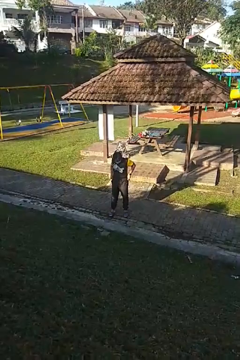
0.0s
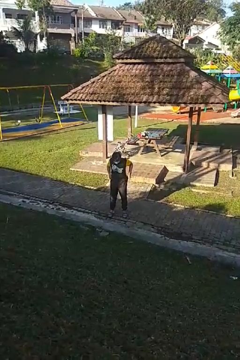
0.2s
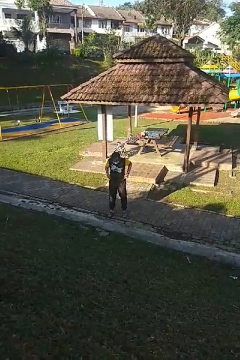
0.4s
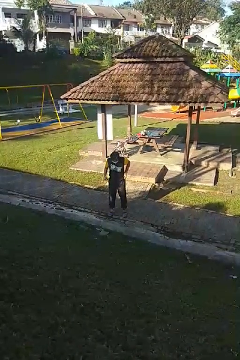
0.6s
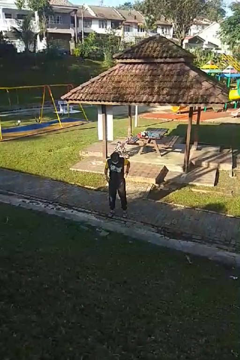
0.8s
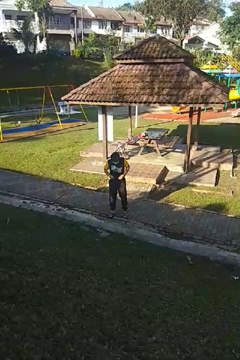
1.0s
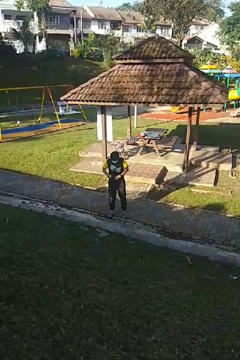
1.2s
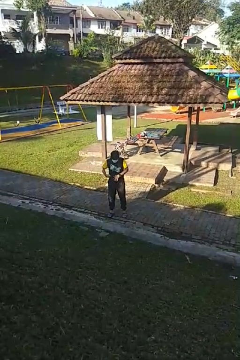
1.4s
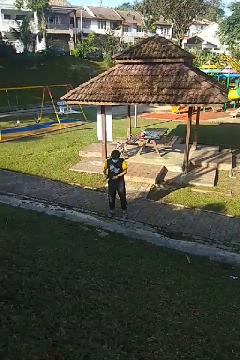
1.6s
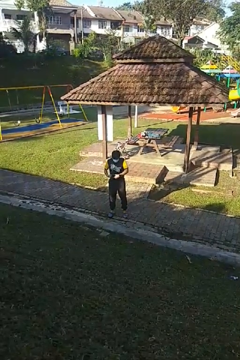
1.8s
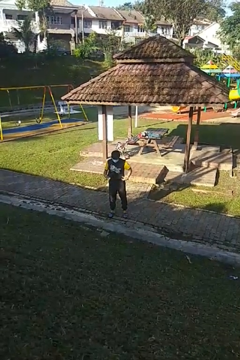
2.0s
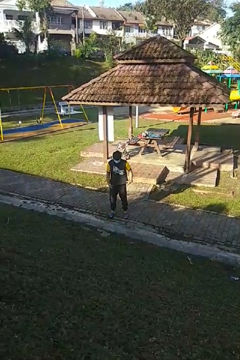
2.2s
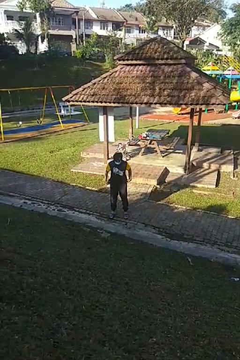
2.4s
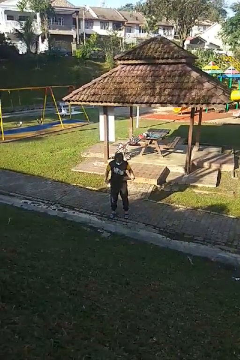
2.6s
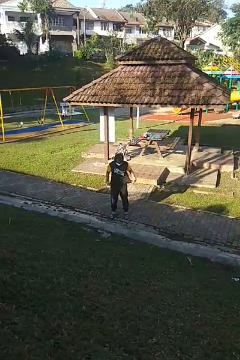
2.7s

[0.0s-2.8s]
person untucks shirt

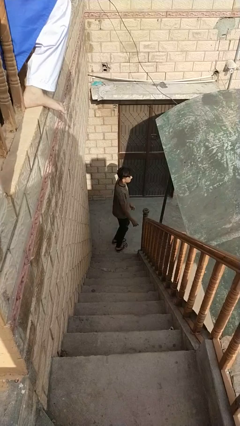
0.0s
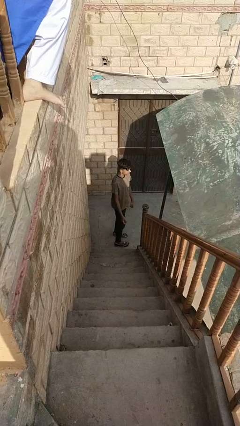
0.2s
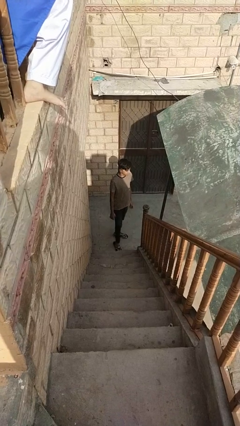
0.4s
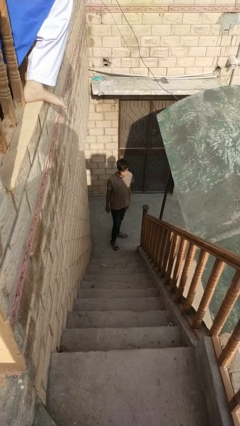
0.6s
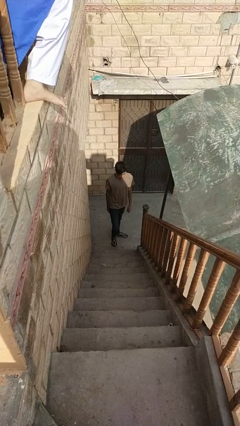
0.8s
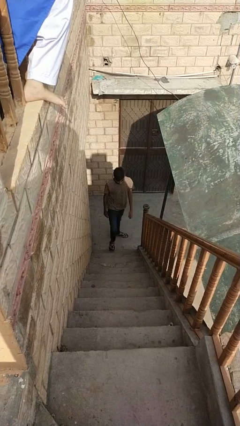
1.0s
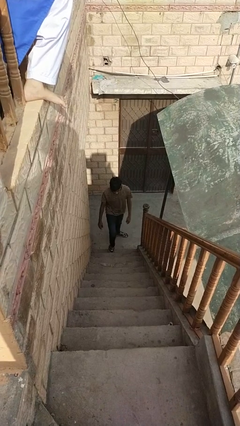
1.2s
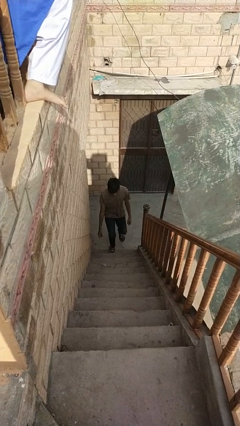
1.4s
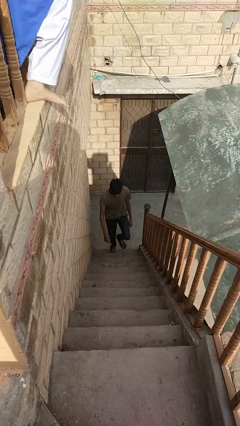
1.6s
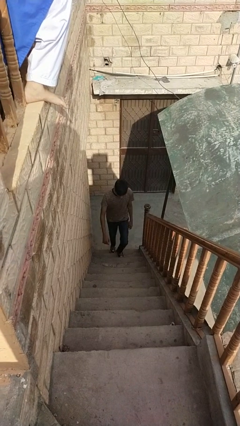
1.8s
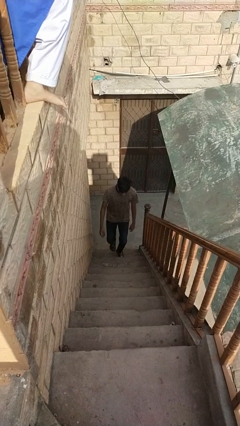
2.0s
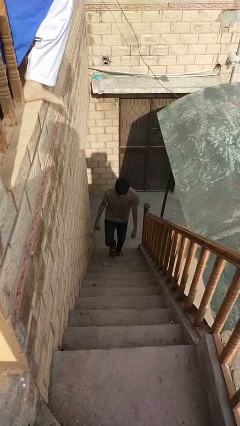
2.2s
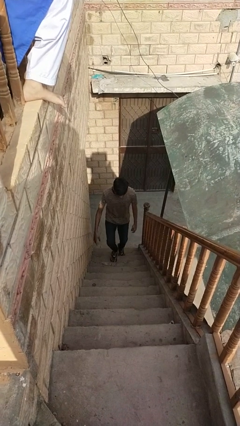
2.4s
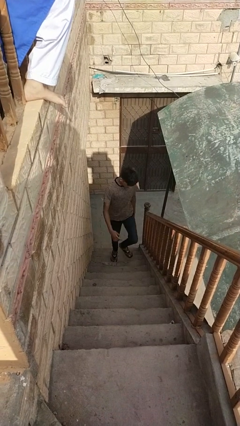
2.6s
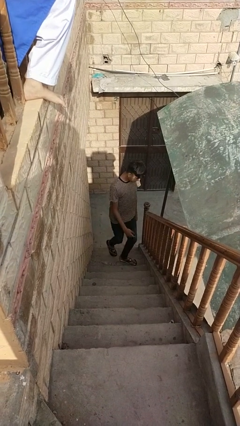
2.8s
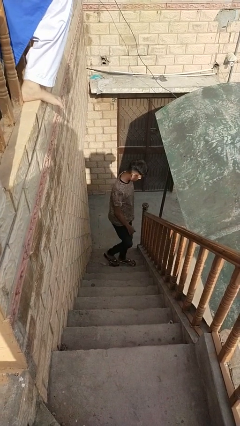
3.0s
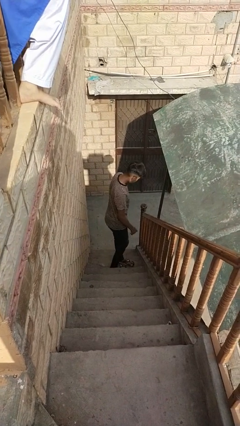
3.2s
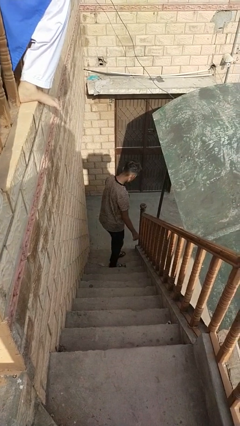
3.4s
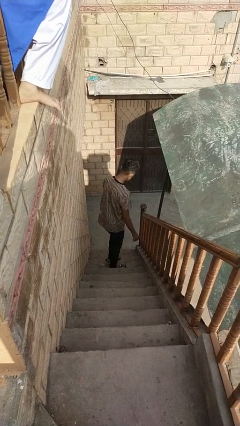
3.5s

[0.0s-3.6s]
person climbs up stairs

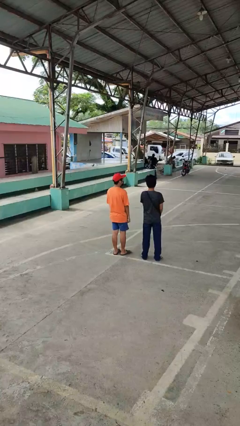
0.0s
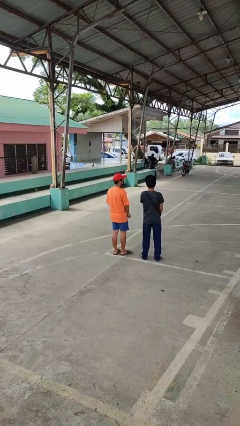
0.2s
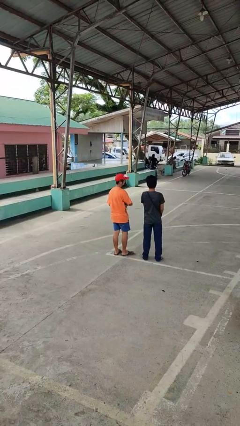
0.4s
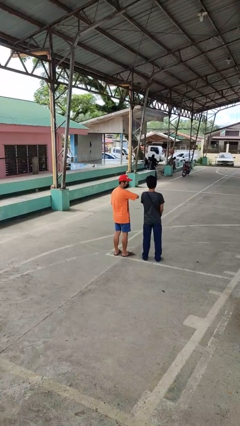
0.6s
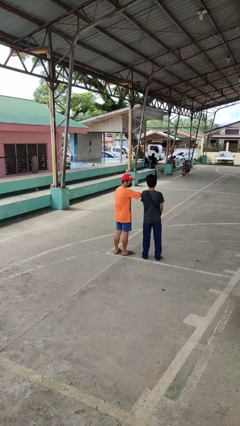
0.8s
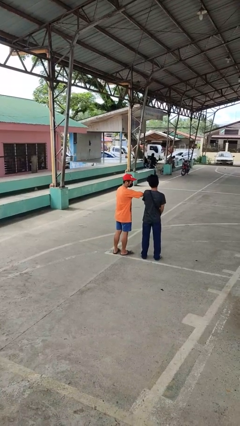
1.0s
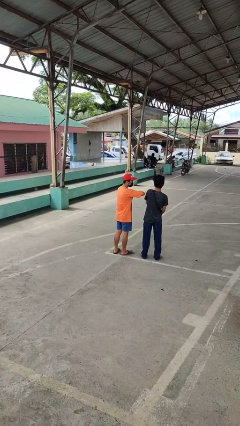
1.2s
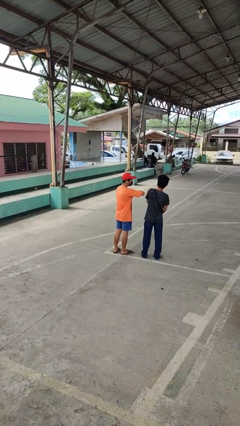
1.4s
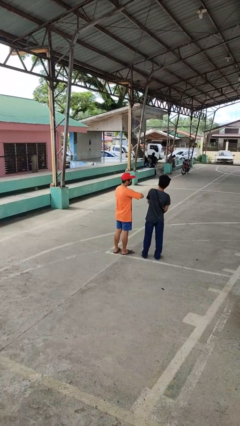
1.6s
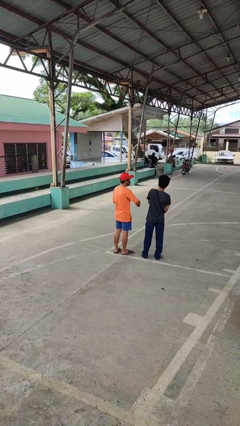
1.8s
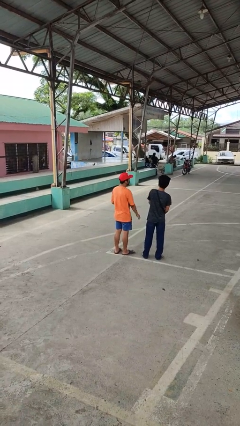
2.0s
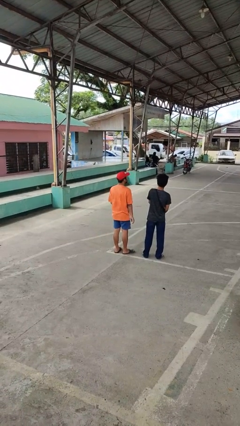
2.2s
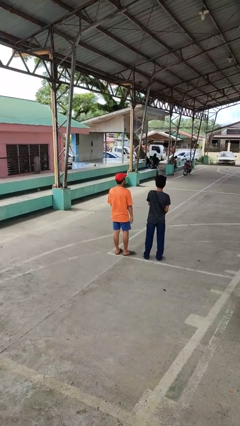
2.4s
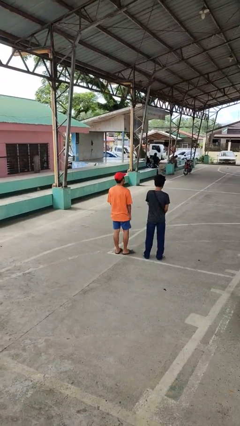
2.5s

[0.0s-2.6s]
person nudges person with elbow

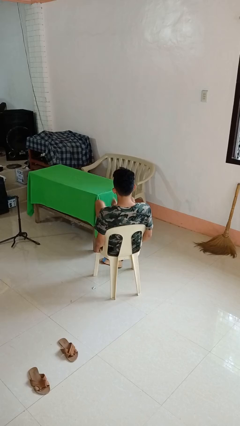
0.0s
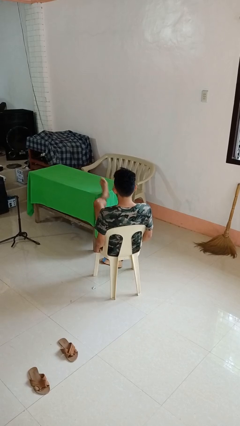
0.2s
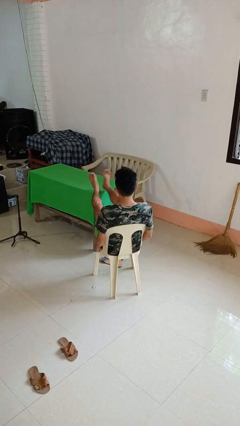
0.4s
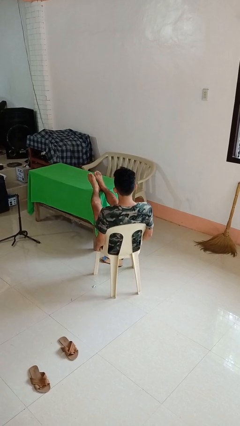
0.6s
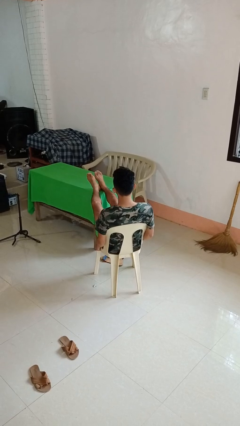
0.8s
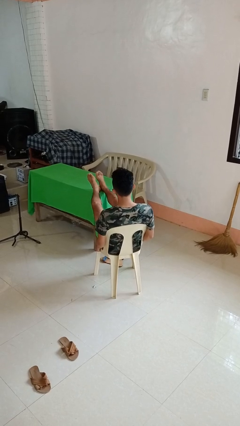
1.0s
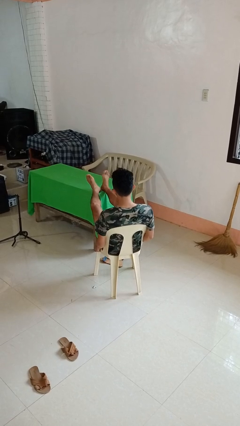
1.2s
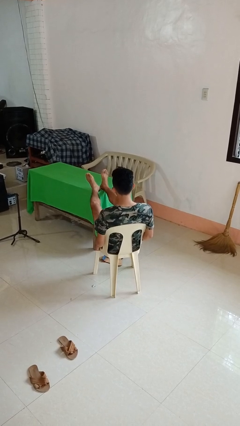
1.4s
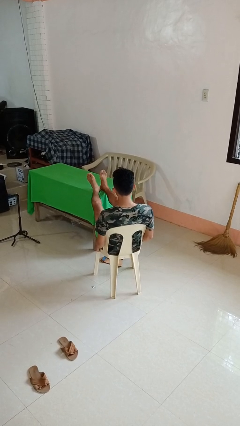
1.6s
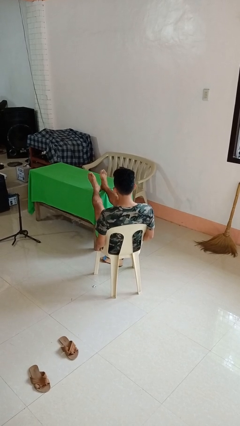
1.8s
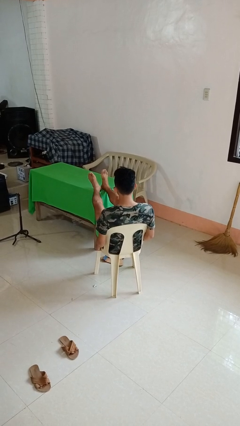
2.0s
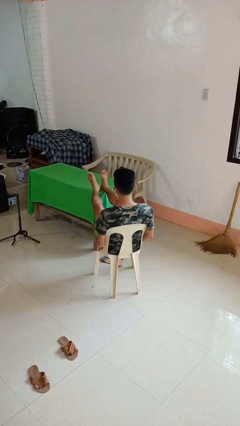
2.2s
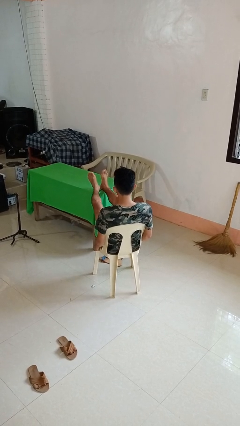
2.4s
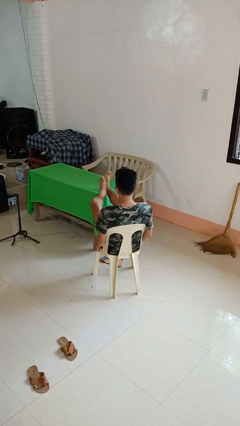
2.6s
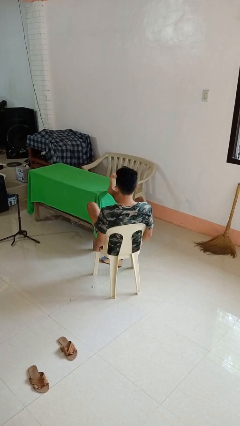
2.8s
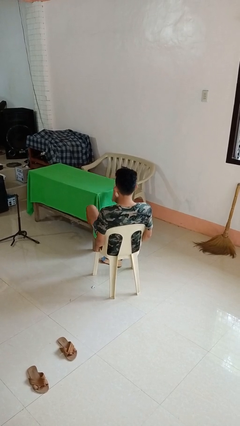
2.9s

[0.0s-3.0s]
person puts feet up

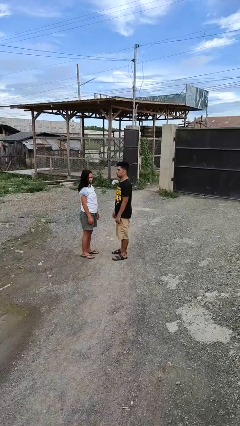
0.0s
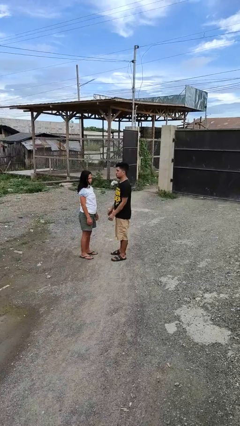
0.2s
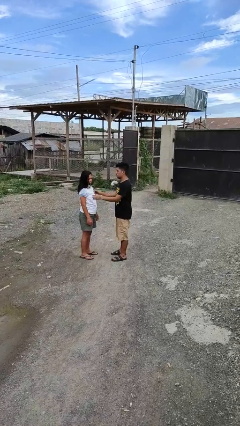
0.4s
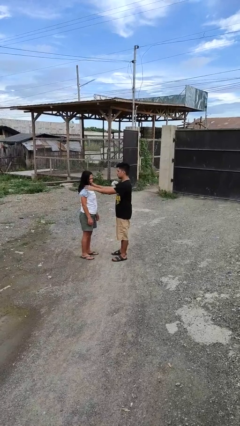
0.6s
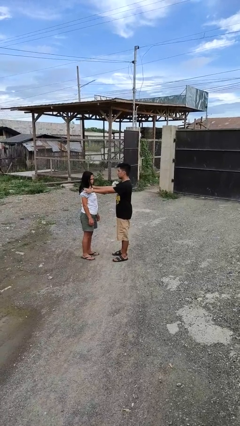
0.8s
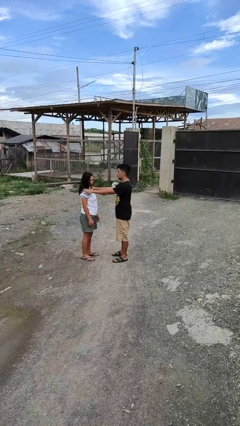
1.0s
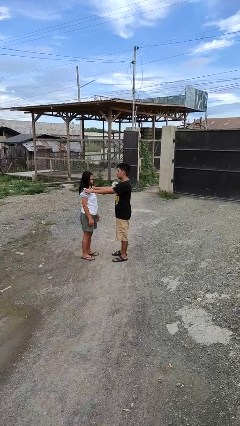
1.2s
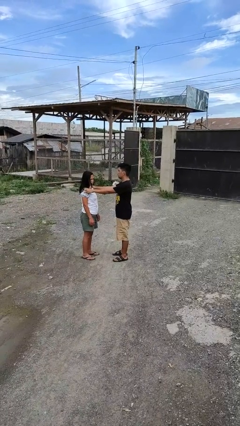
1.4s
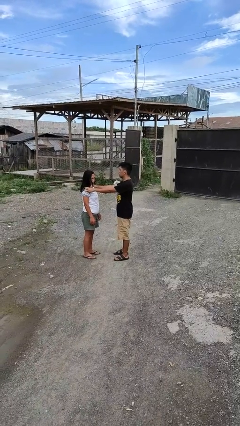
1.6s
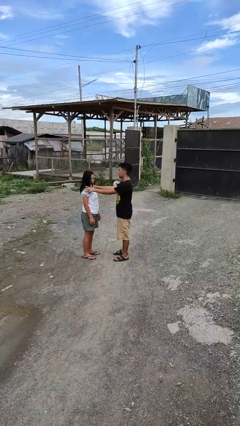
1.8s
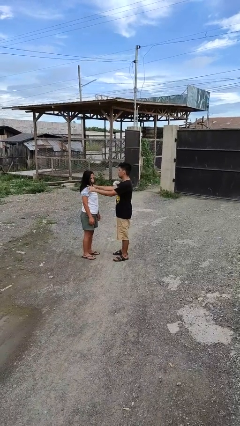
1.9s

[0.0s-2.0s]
person grabs person by shoulder

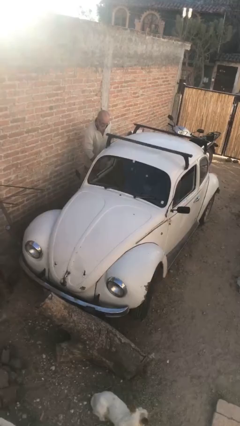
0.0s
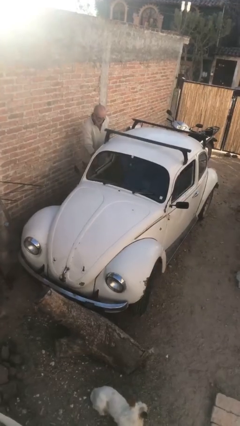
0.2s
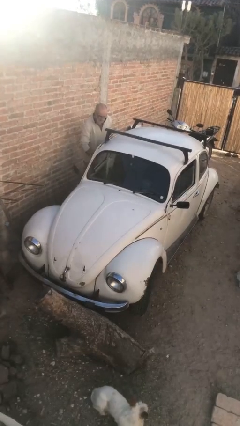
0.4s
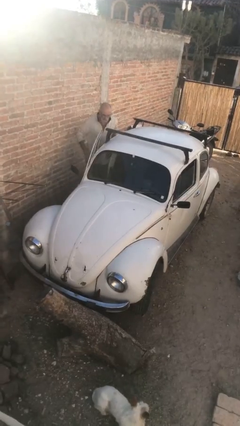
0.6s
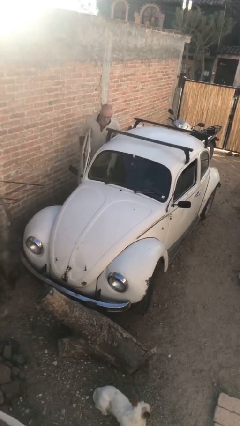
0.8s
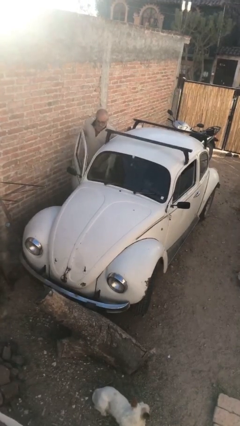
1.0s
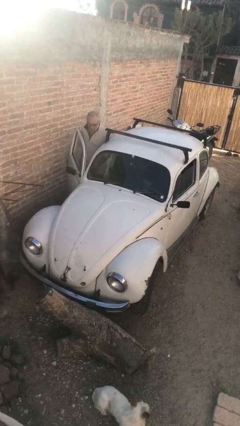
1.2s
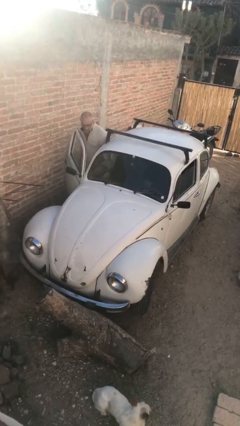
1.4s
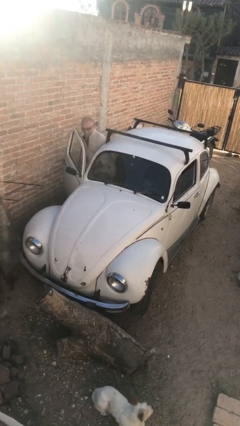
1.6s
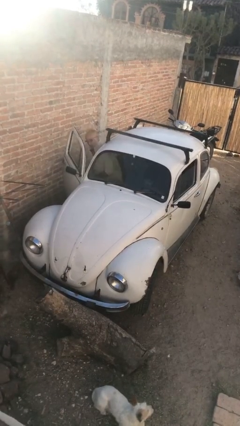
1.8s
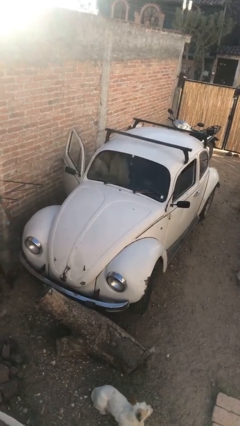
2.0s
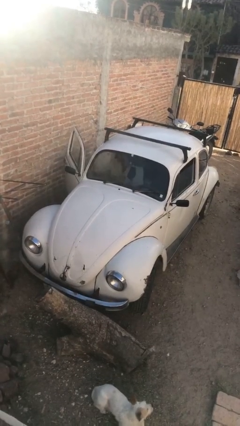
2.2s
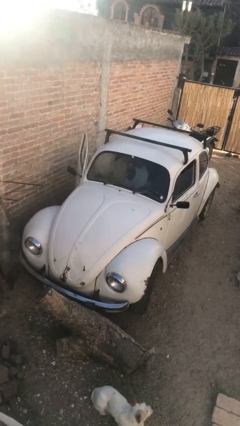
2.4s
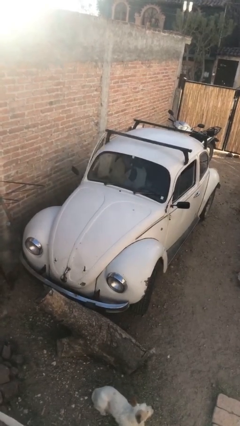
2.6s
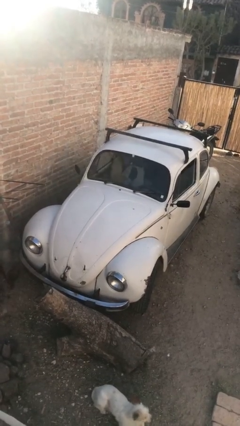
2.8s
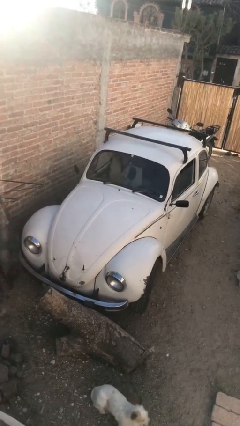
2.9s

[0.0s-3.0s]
car picks up person

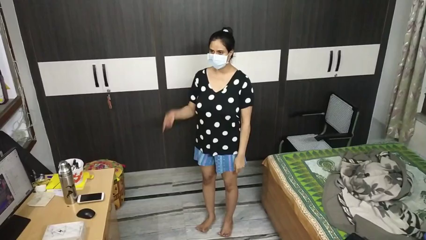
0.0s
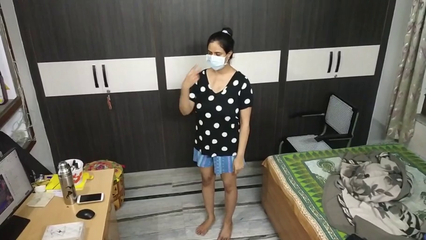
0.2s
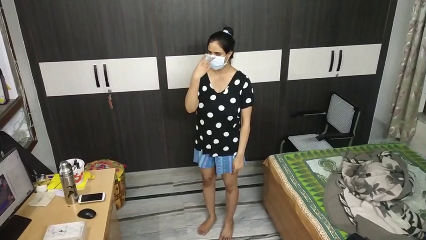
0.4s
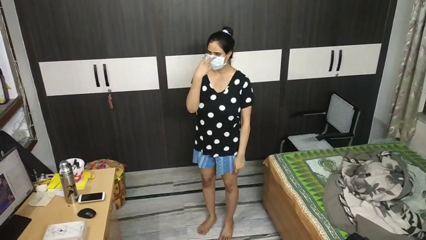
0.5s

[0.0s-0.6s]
person gestures watch closely
